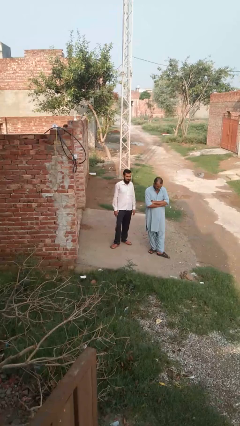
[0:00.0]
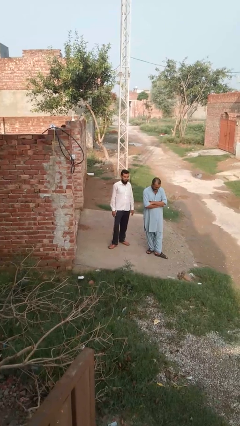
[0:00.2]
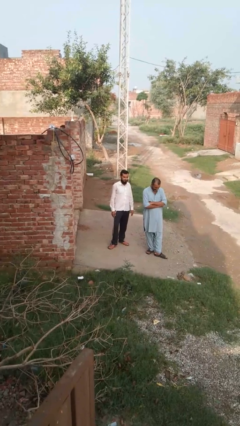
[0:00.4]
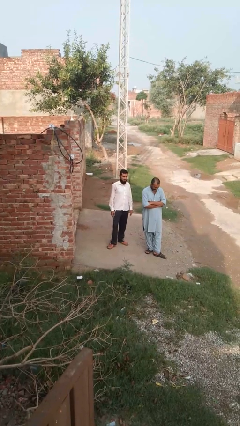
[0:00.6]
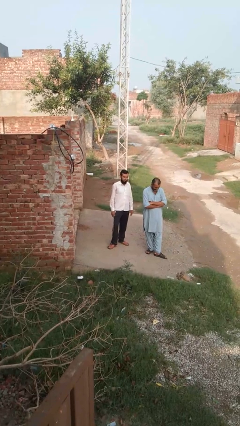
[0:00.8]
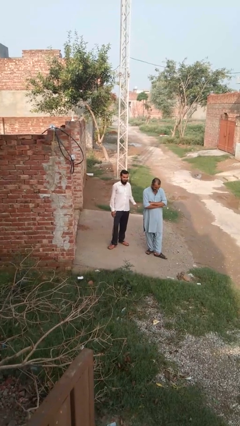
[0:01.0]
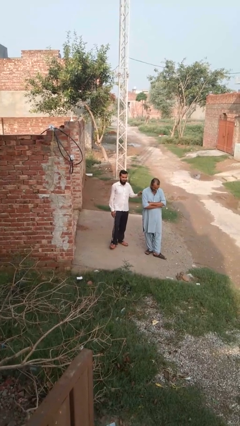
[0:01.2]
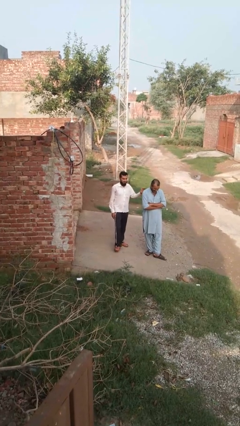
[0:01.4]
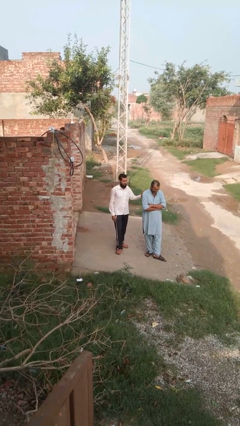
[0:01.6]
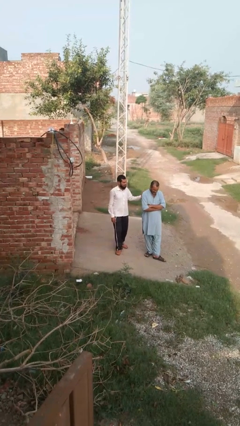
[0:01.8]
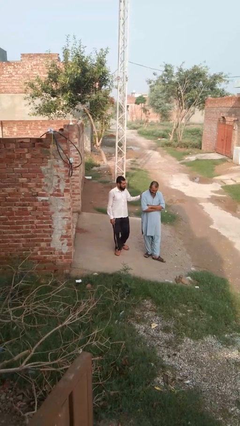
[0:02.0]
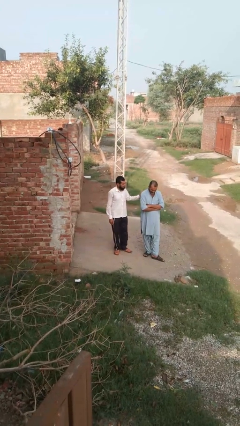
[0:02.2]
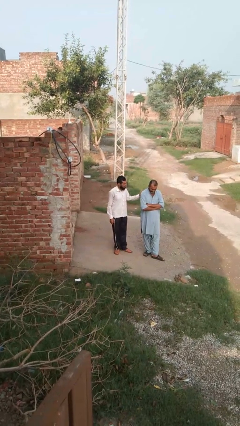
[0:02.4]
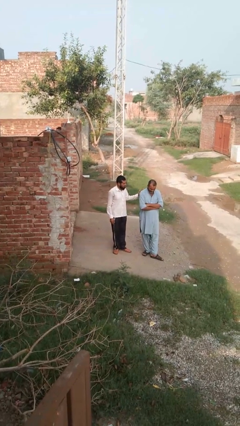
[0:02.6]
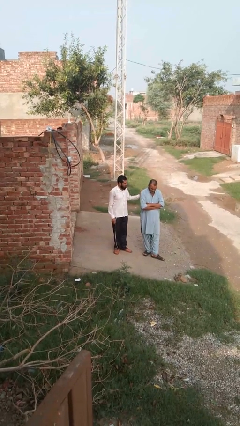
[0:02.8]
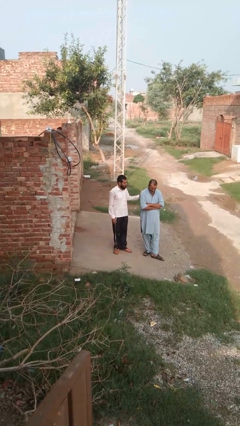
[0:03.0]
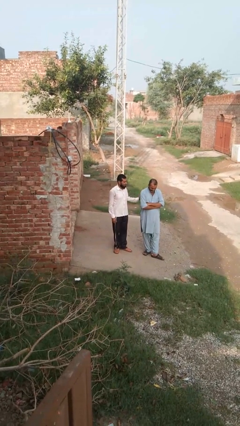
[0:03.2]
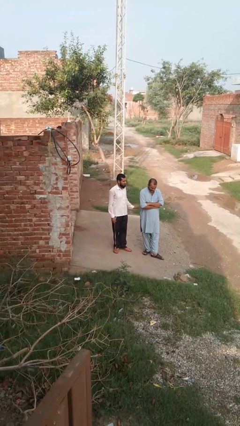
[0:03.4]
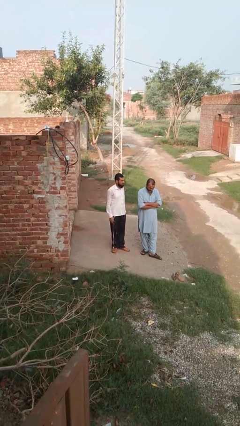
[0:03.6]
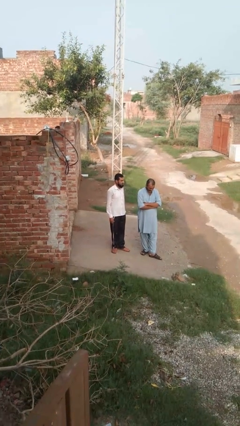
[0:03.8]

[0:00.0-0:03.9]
person pounds shoulders of person

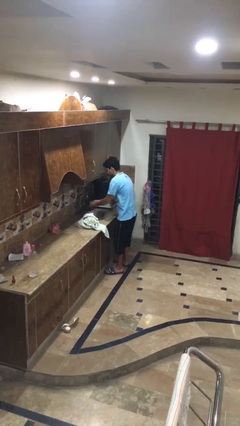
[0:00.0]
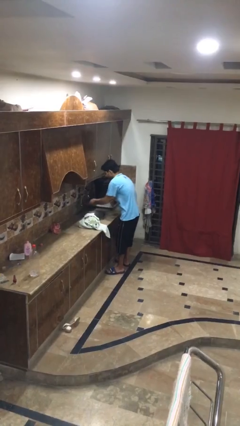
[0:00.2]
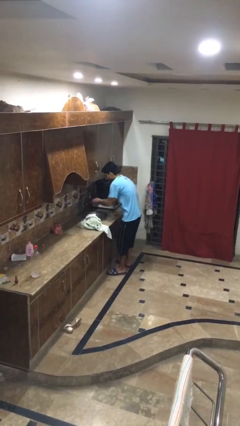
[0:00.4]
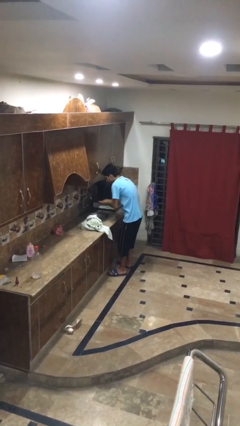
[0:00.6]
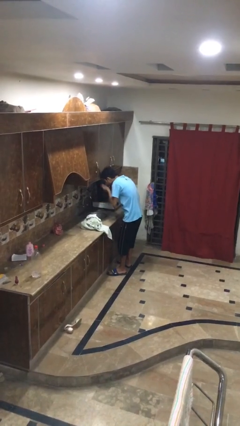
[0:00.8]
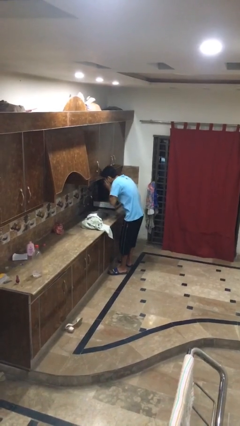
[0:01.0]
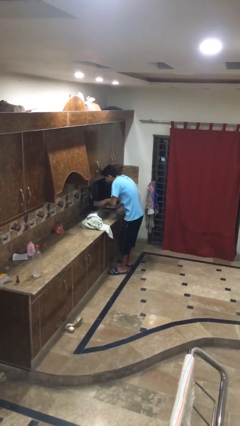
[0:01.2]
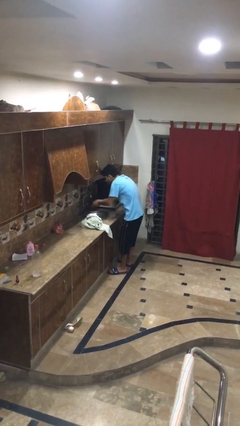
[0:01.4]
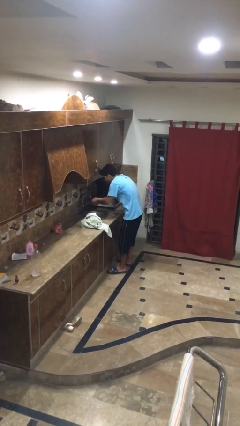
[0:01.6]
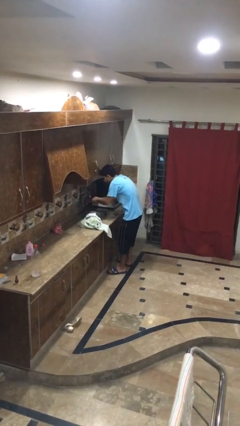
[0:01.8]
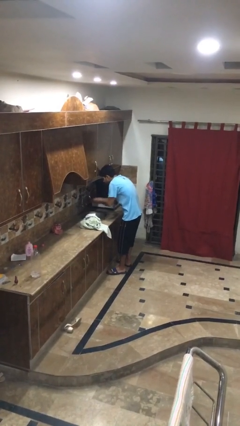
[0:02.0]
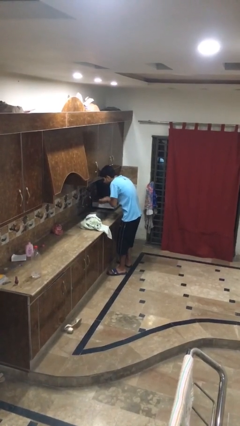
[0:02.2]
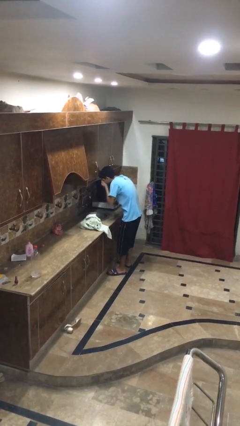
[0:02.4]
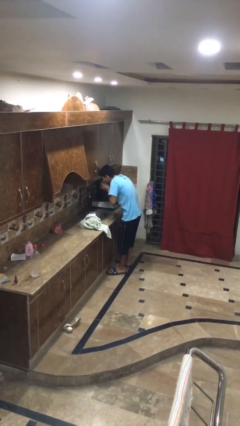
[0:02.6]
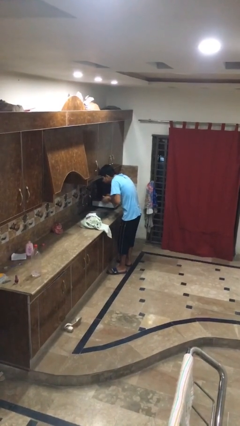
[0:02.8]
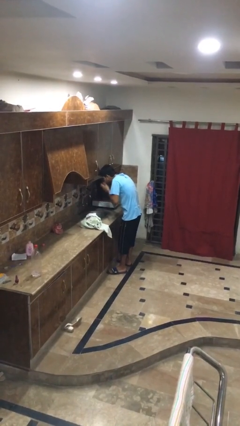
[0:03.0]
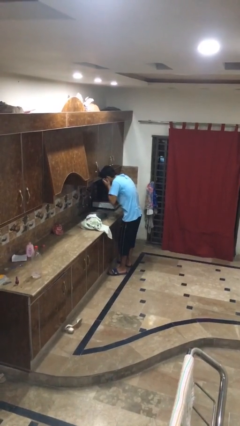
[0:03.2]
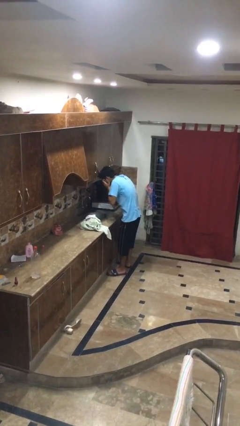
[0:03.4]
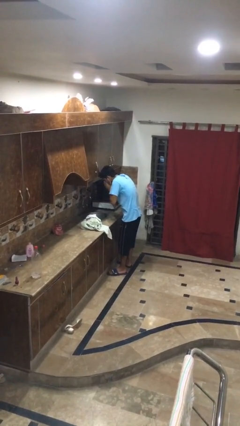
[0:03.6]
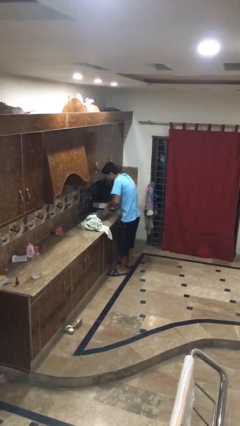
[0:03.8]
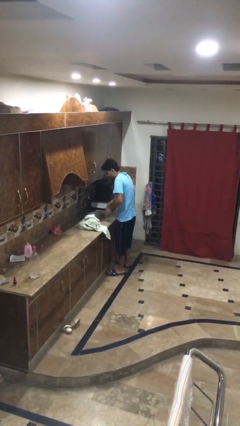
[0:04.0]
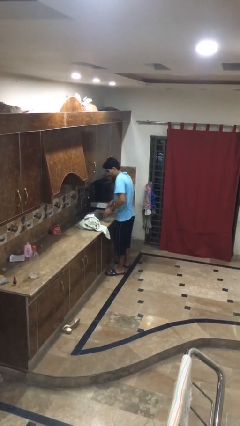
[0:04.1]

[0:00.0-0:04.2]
person washes face

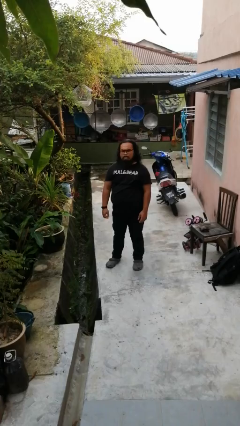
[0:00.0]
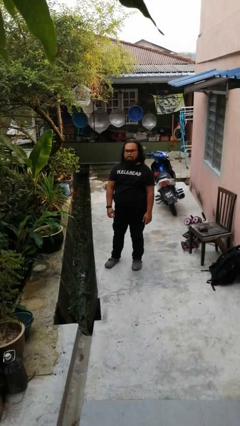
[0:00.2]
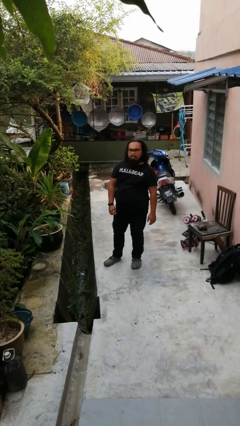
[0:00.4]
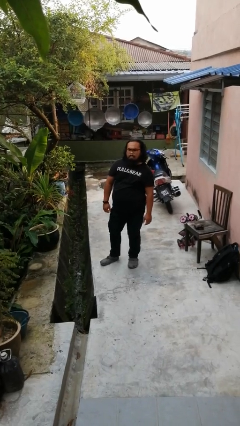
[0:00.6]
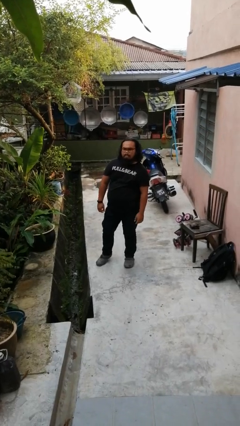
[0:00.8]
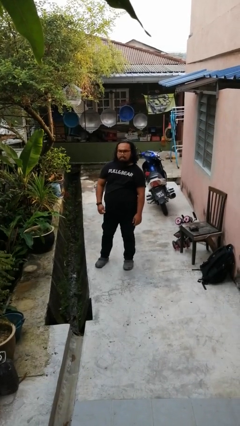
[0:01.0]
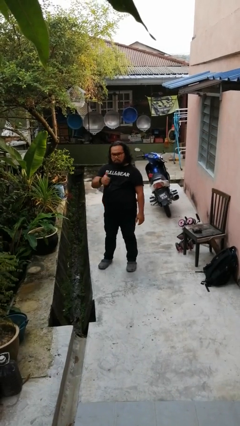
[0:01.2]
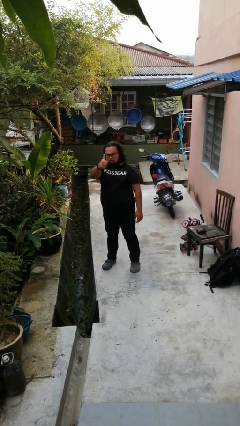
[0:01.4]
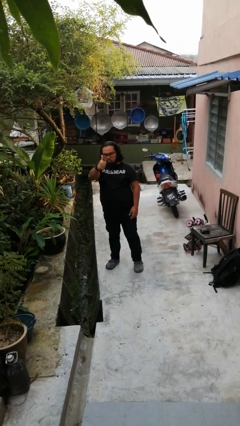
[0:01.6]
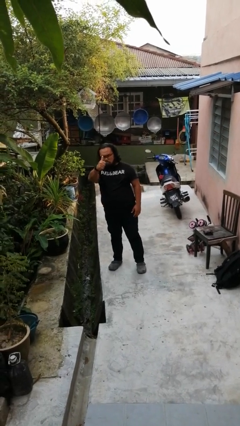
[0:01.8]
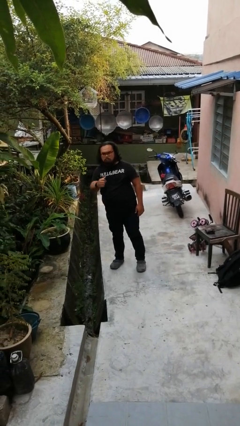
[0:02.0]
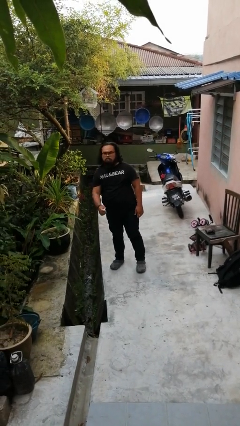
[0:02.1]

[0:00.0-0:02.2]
person gestures thumbs up

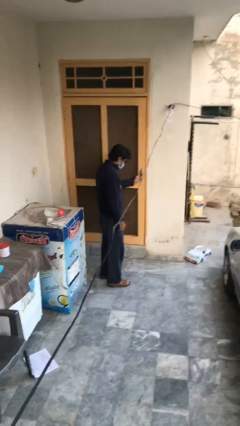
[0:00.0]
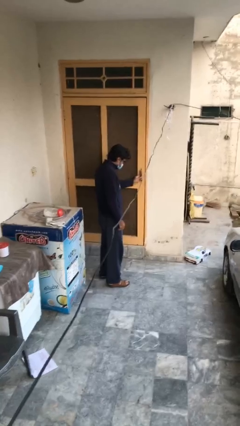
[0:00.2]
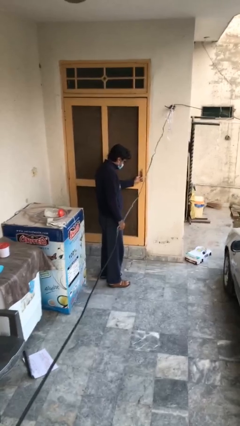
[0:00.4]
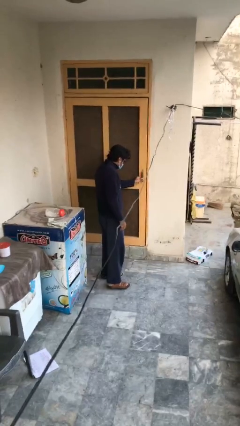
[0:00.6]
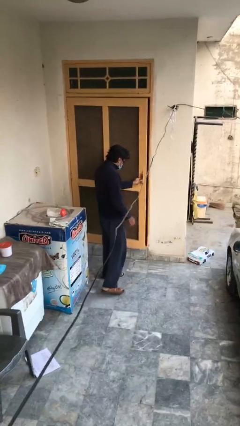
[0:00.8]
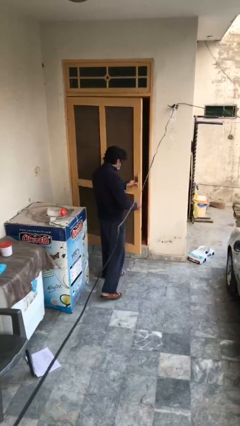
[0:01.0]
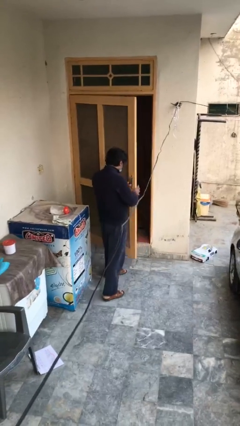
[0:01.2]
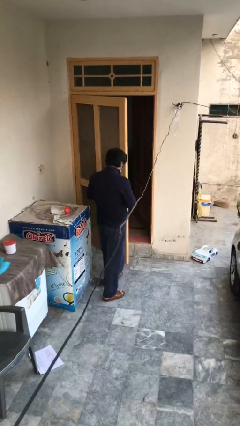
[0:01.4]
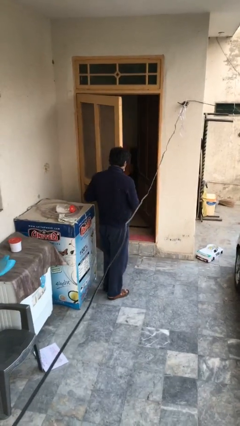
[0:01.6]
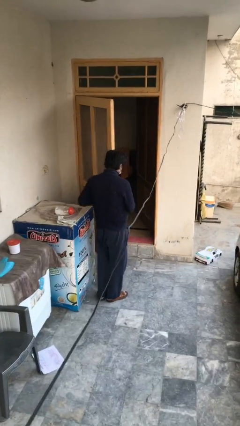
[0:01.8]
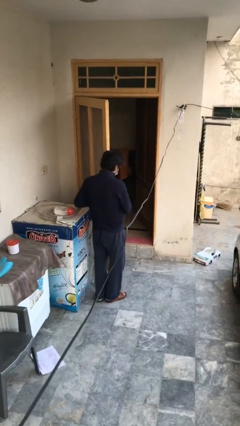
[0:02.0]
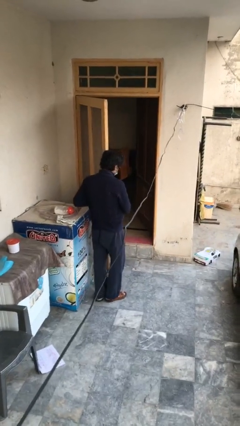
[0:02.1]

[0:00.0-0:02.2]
person opens facility door

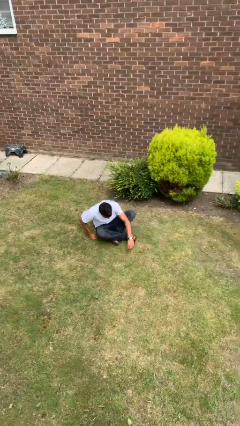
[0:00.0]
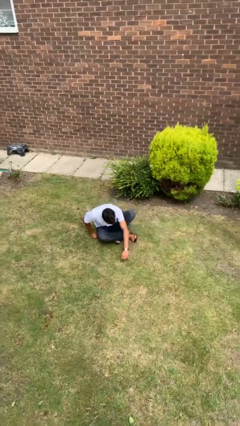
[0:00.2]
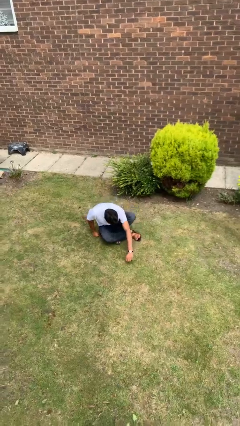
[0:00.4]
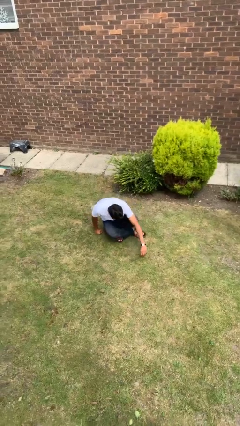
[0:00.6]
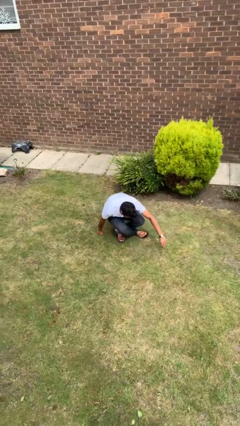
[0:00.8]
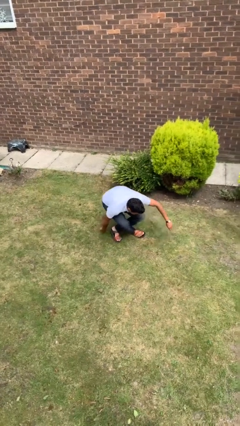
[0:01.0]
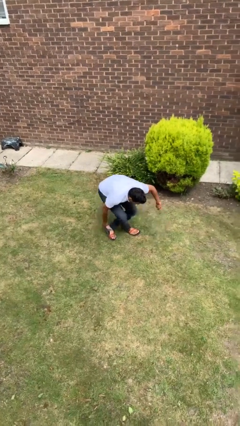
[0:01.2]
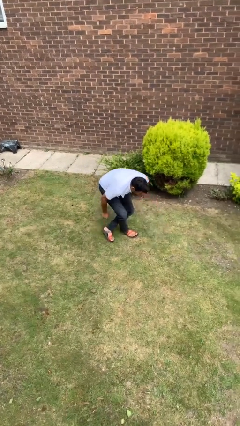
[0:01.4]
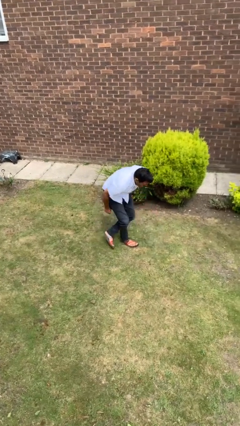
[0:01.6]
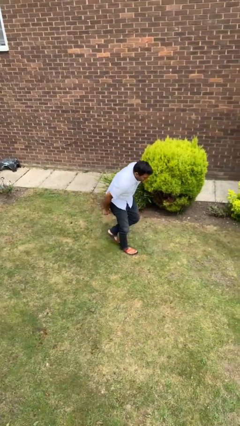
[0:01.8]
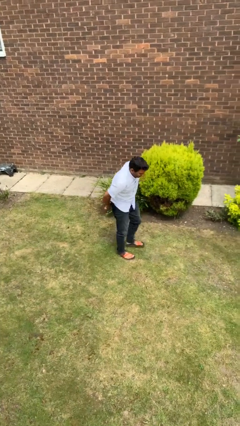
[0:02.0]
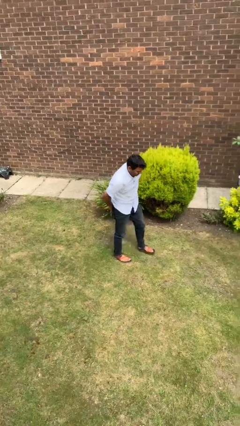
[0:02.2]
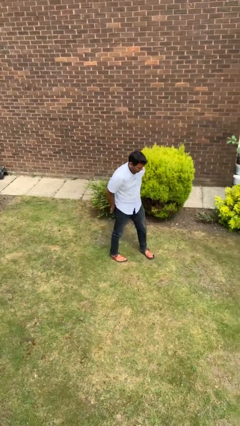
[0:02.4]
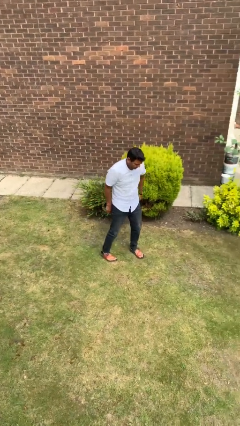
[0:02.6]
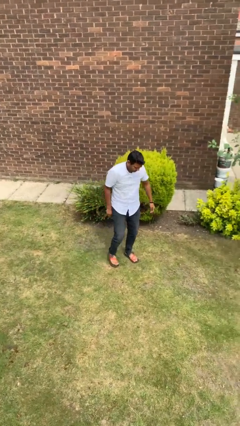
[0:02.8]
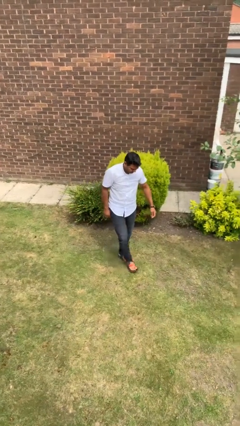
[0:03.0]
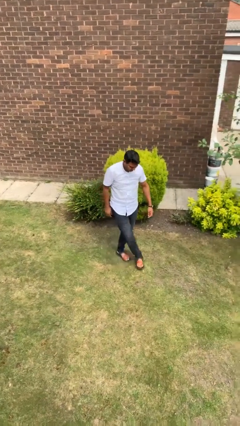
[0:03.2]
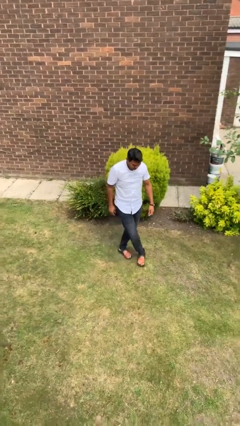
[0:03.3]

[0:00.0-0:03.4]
person stands up from floor

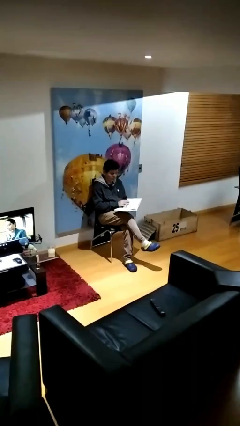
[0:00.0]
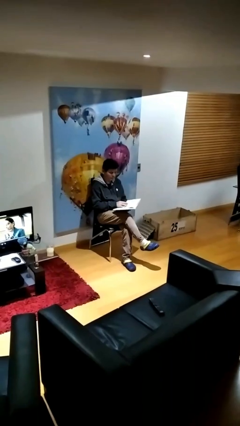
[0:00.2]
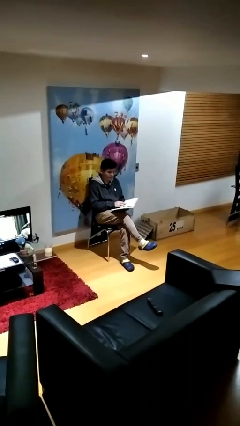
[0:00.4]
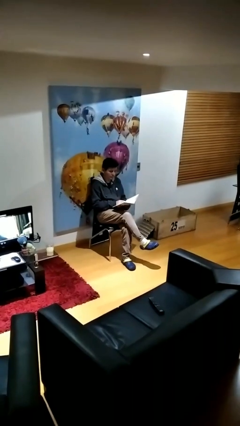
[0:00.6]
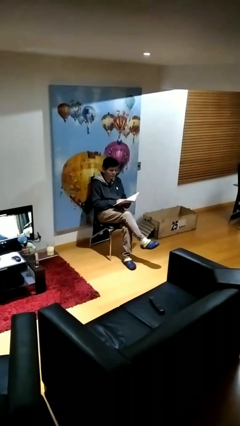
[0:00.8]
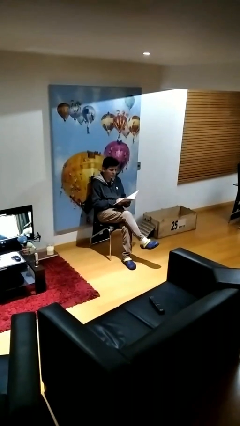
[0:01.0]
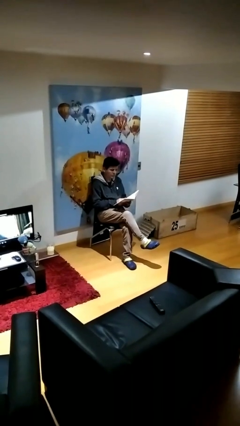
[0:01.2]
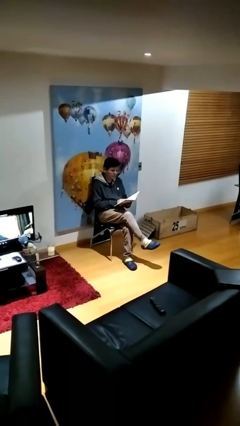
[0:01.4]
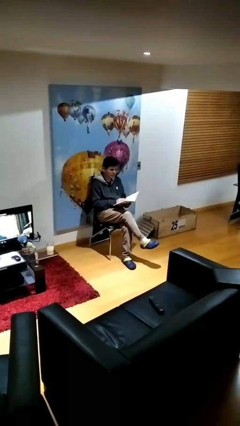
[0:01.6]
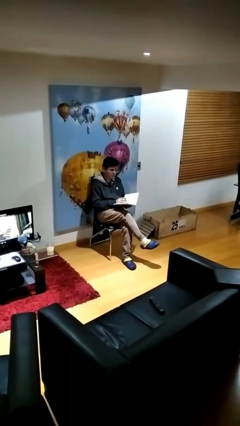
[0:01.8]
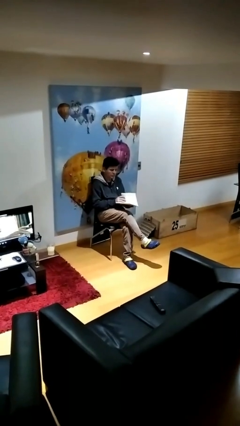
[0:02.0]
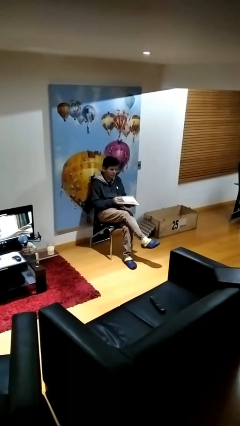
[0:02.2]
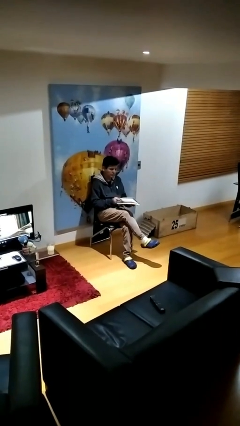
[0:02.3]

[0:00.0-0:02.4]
person reads document
